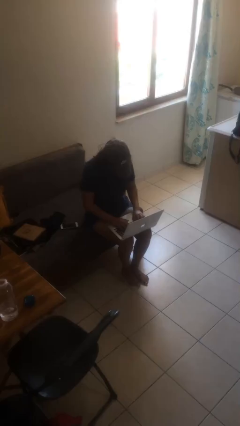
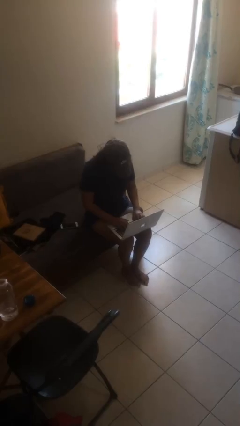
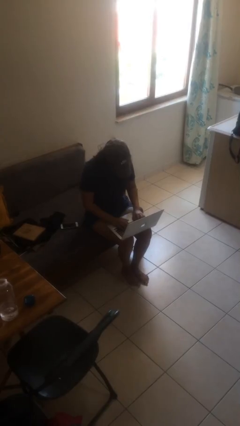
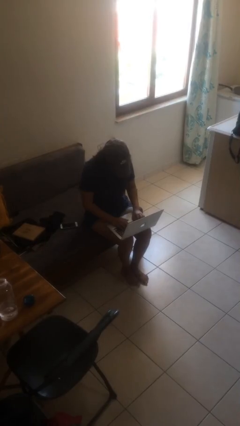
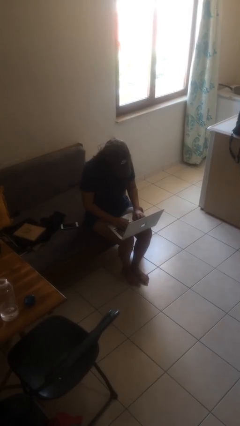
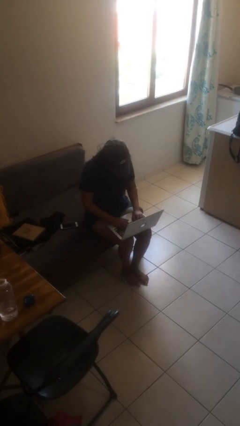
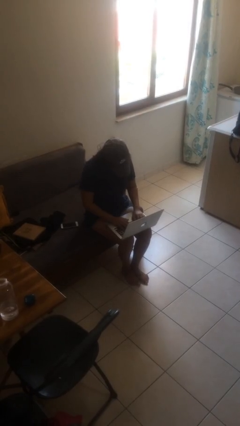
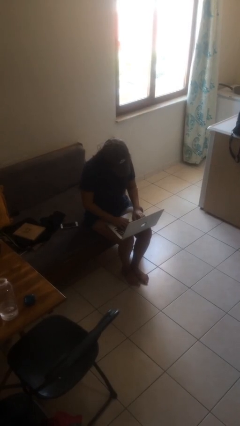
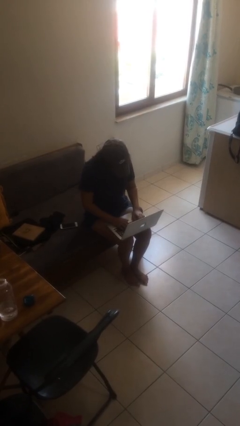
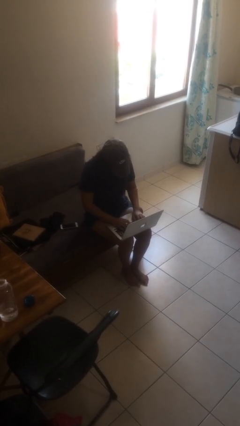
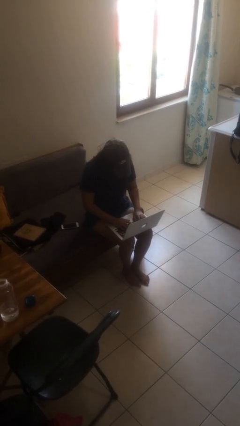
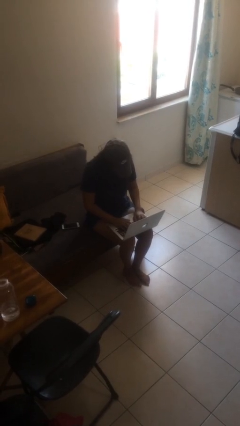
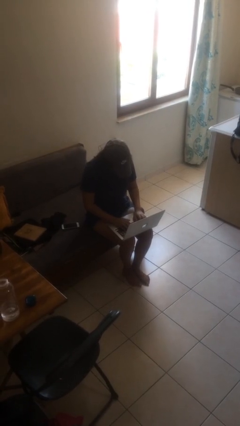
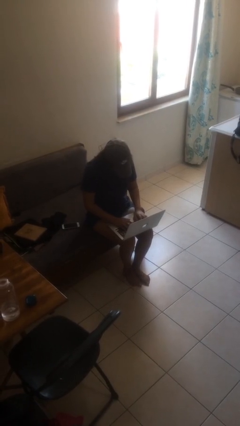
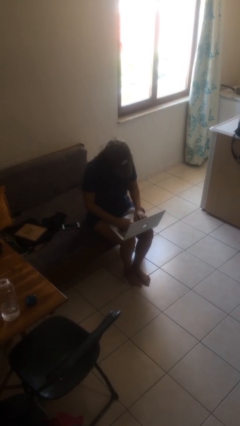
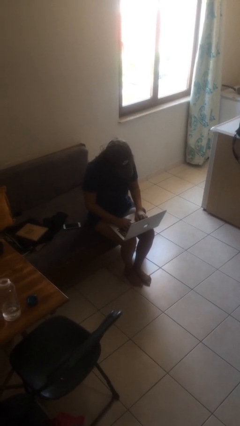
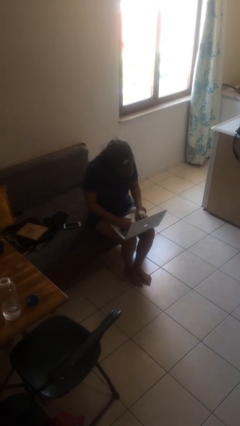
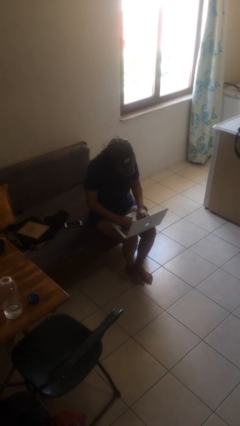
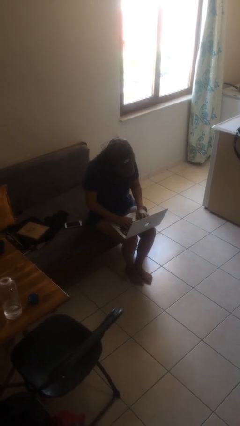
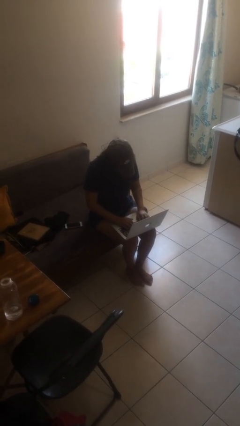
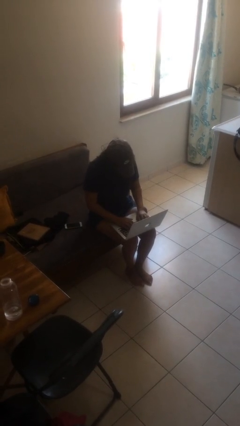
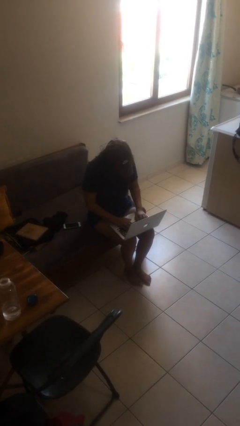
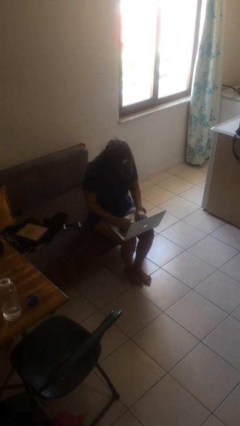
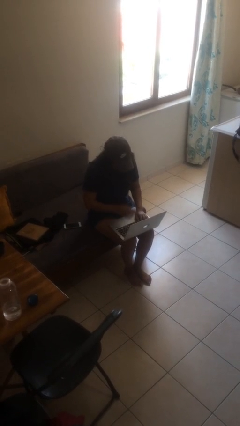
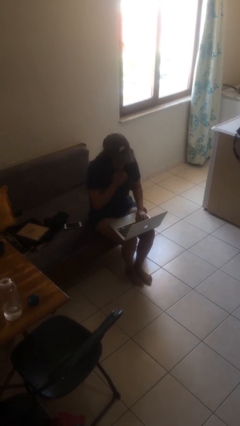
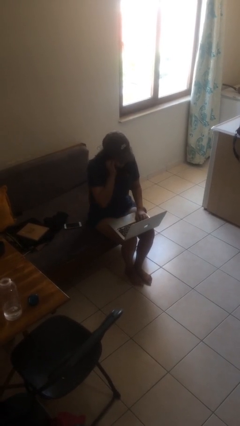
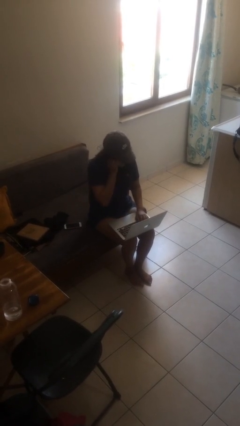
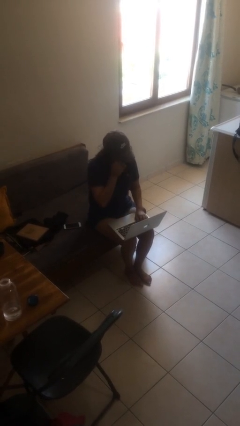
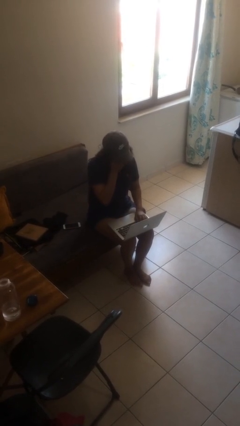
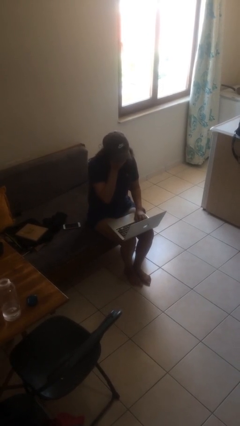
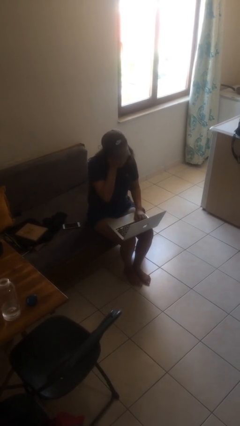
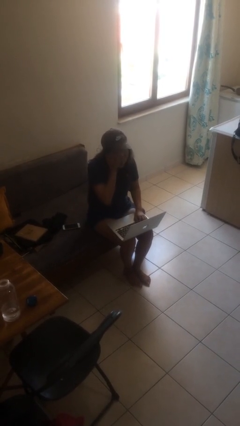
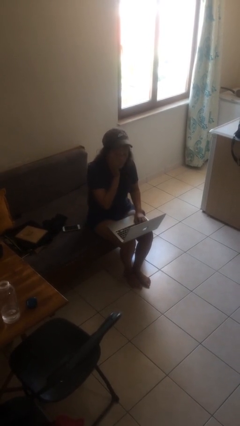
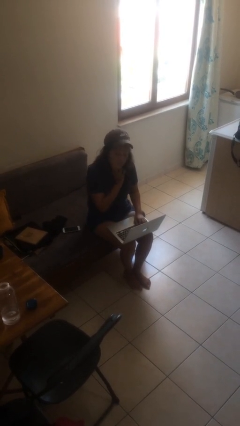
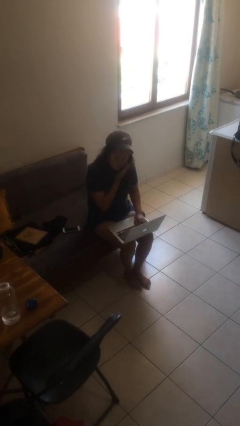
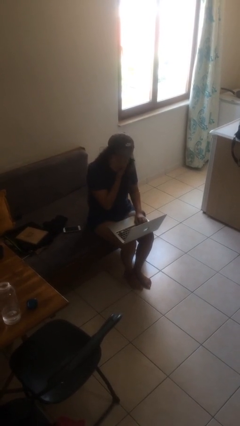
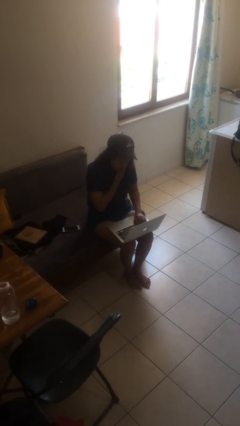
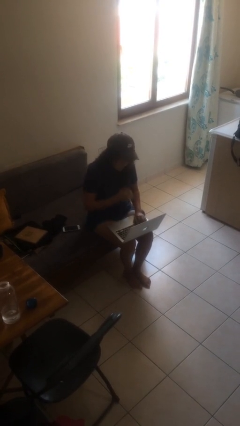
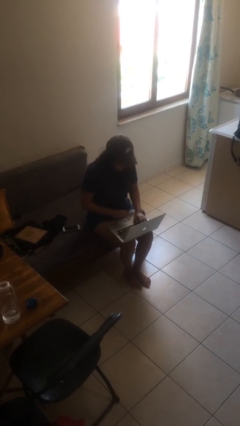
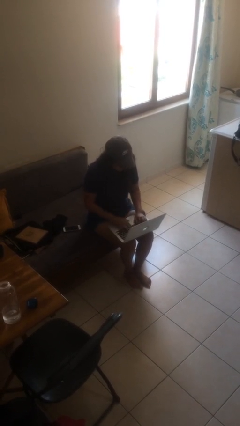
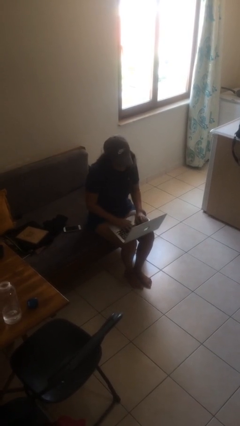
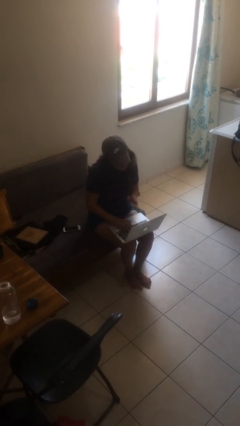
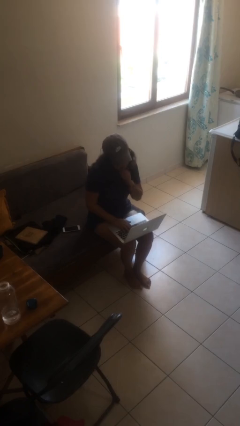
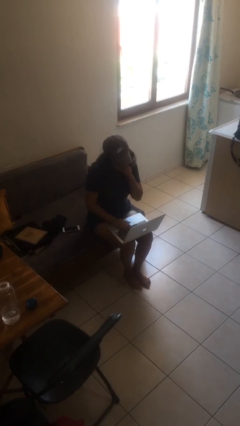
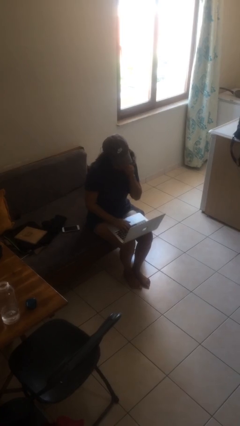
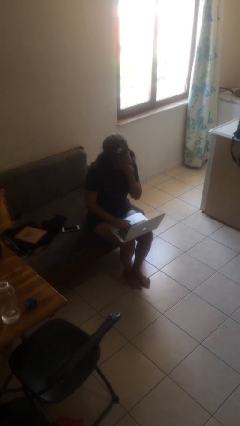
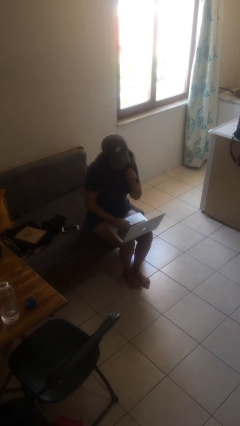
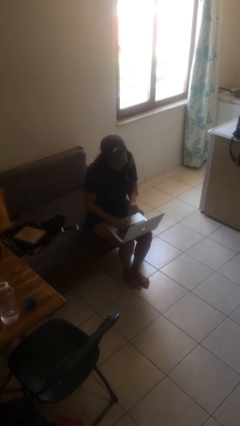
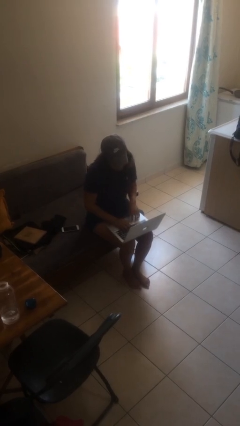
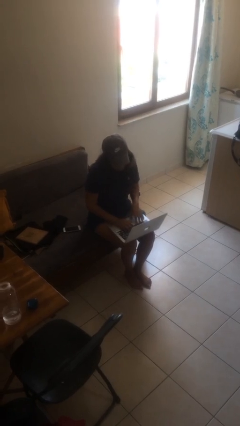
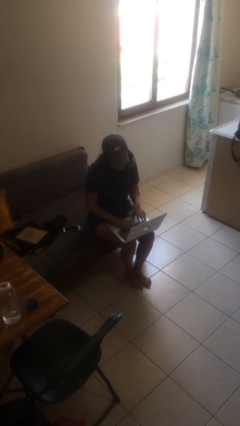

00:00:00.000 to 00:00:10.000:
person interacts with laptop

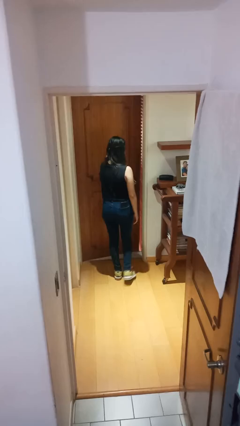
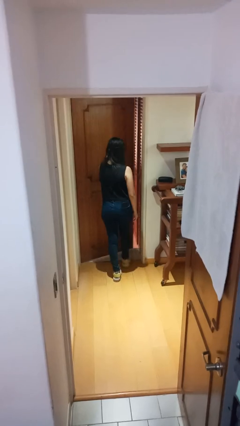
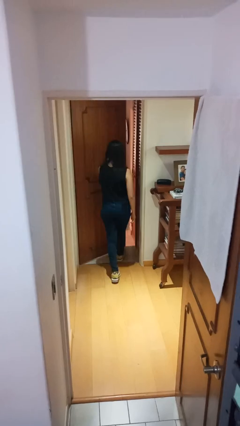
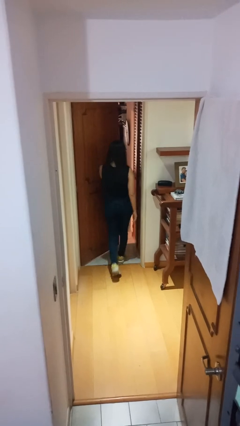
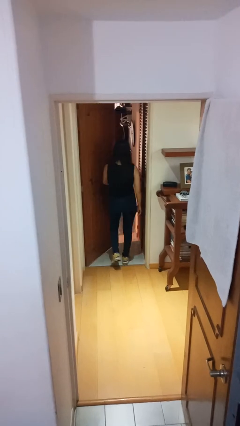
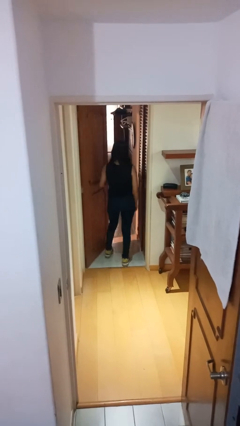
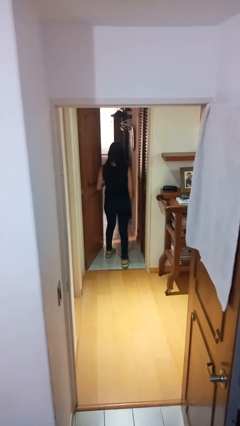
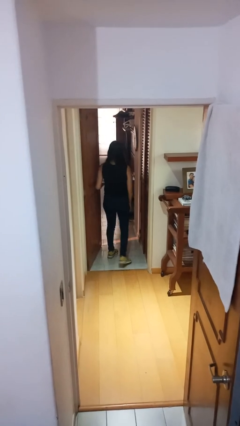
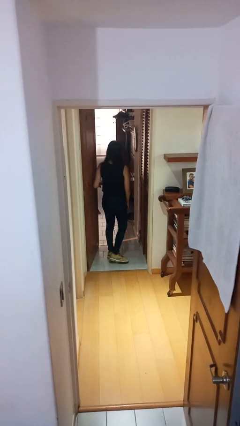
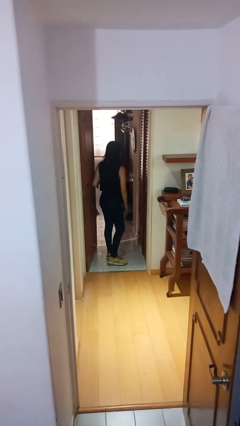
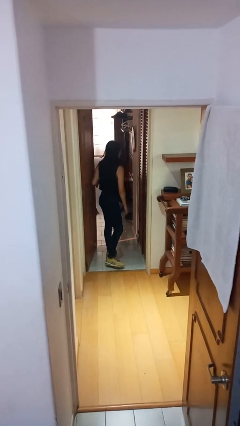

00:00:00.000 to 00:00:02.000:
person opens facility door

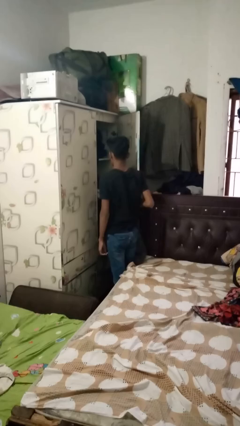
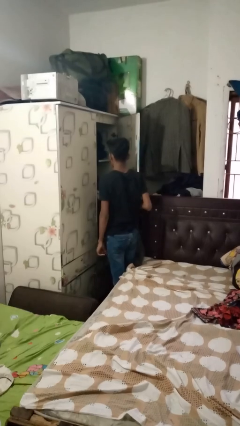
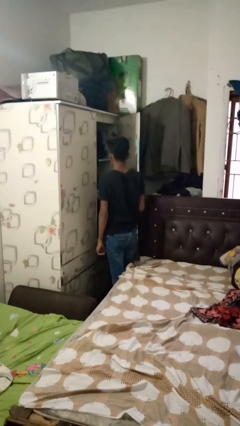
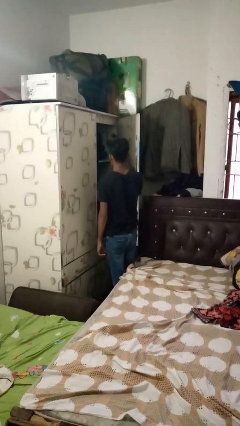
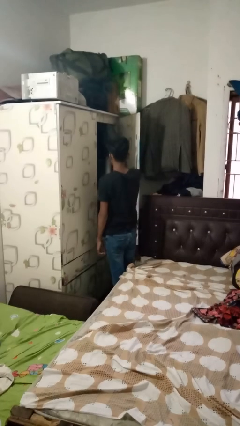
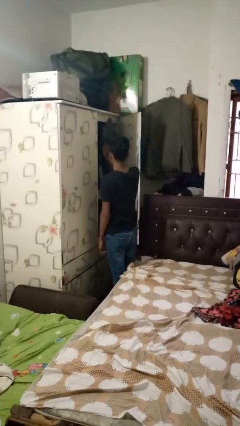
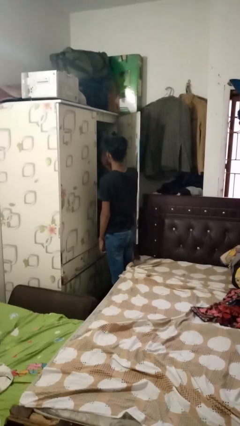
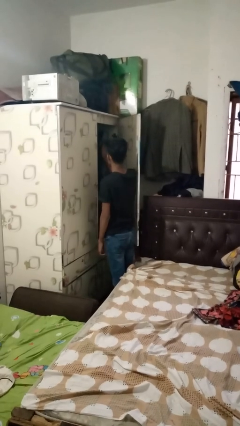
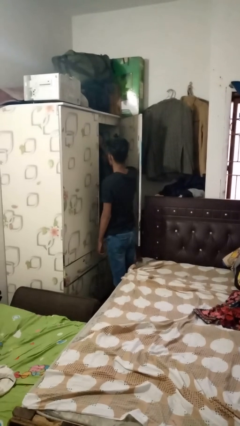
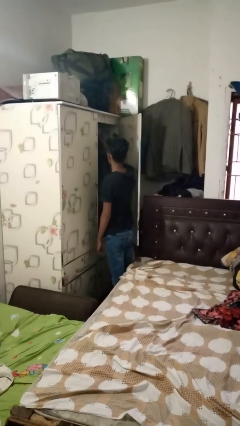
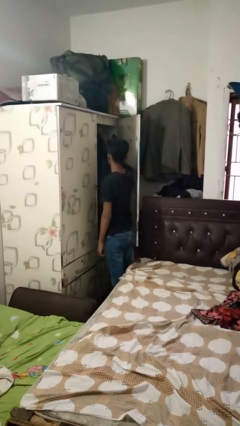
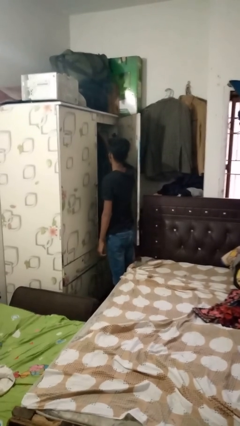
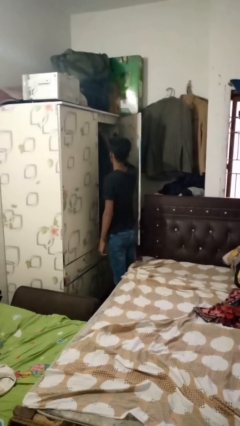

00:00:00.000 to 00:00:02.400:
person puts clothes into closet

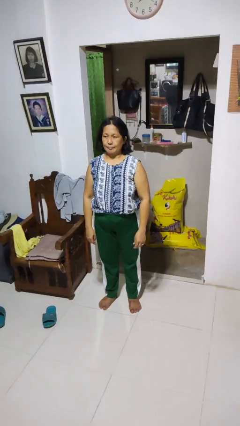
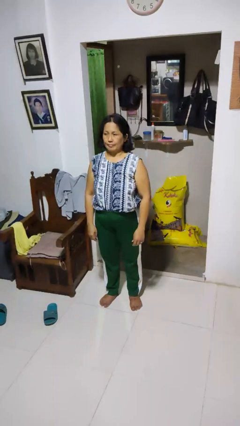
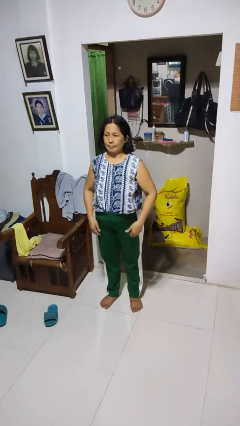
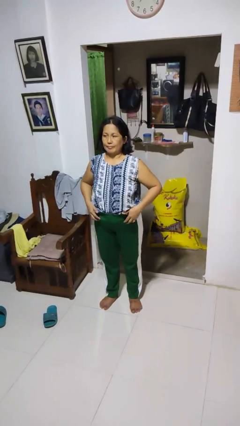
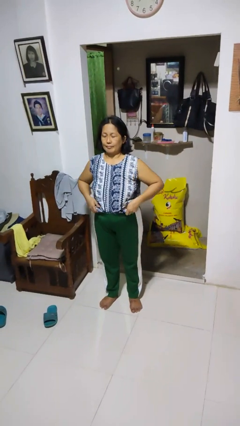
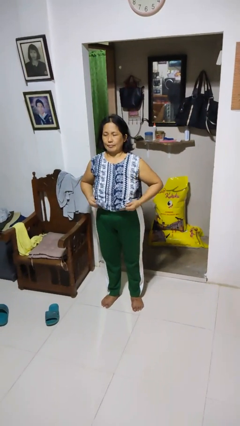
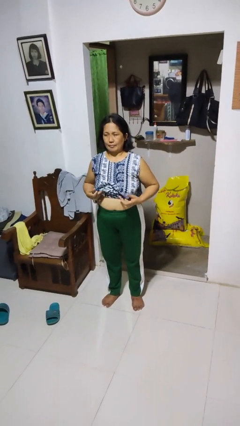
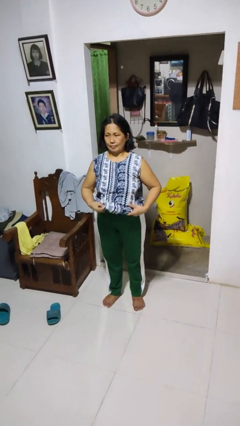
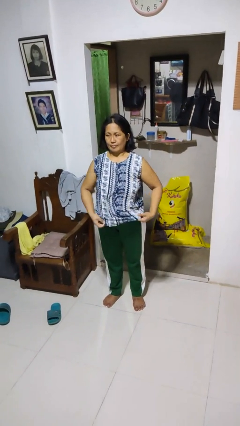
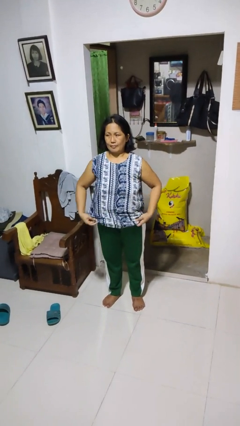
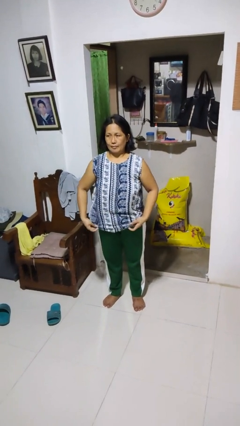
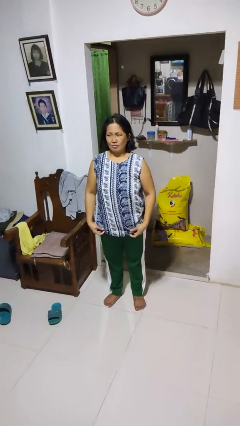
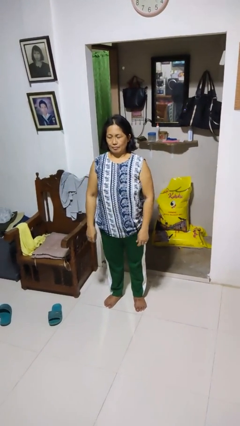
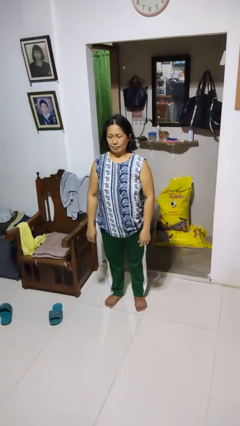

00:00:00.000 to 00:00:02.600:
person untucks shirt

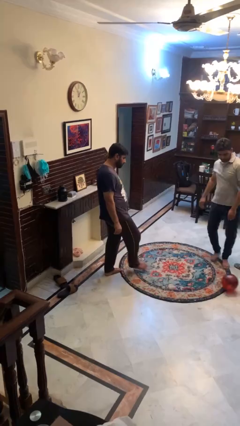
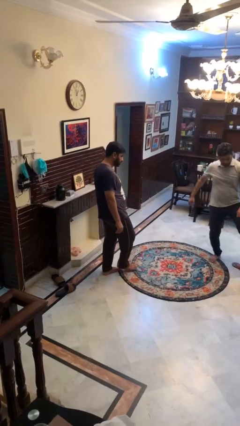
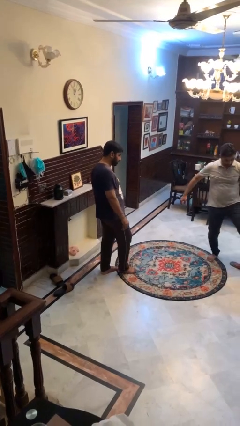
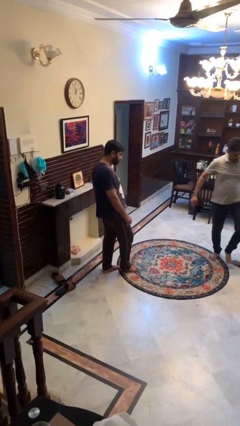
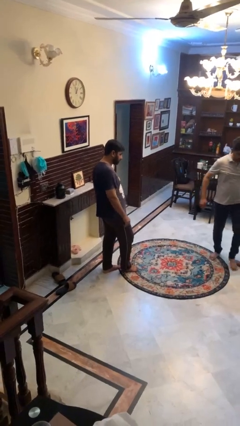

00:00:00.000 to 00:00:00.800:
person kicks object to person
